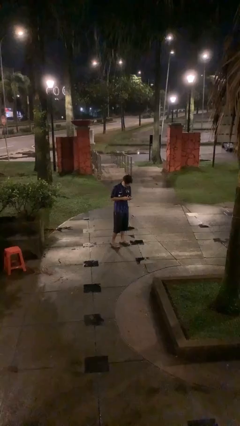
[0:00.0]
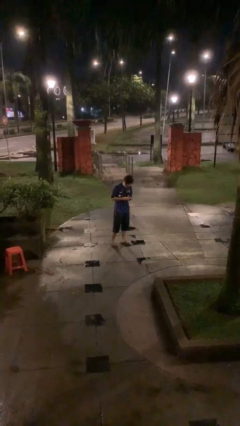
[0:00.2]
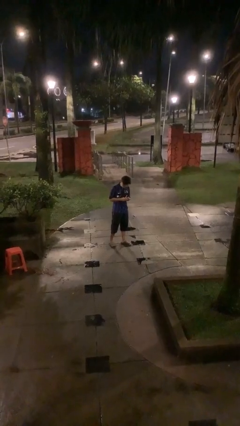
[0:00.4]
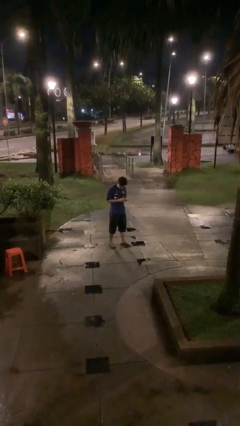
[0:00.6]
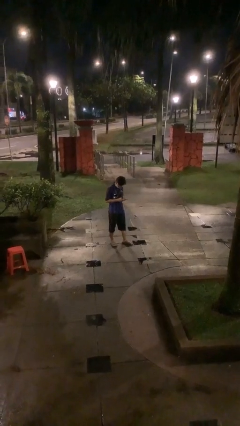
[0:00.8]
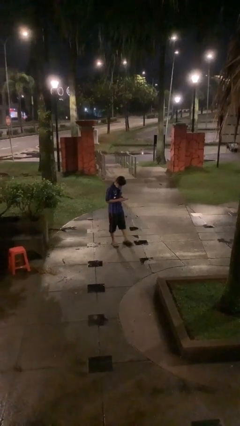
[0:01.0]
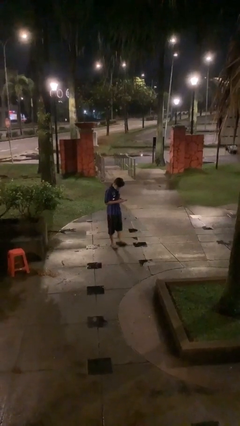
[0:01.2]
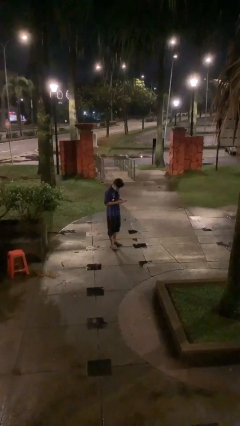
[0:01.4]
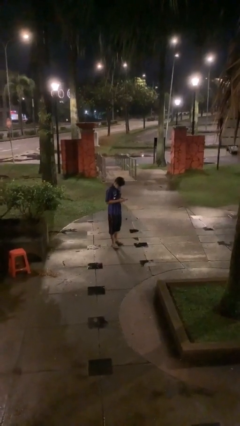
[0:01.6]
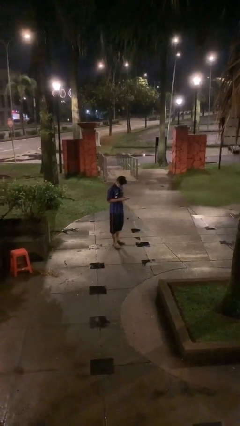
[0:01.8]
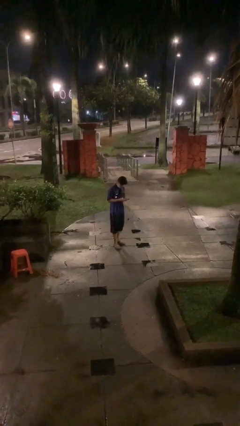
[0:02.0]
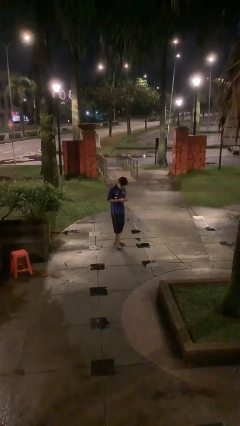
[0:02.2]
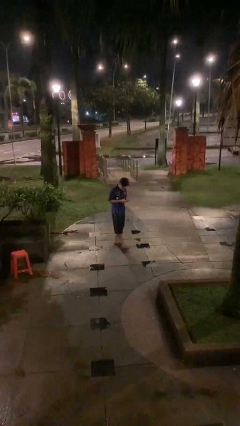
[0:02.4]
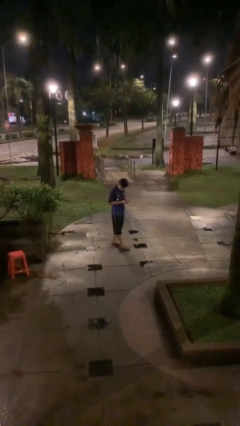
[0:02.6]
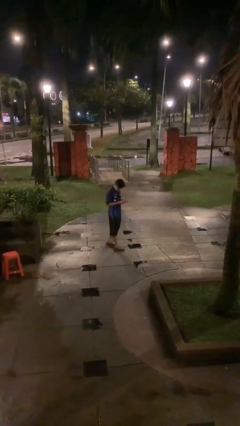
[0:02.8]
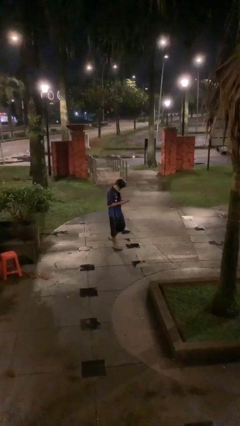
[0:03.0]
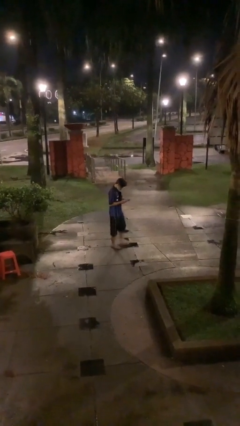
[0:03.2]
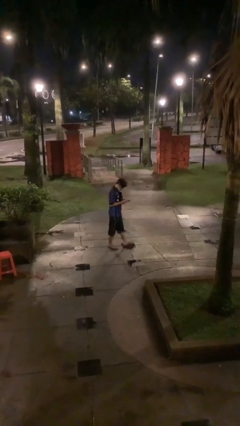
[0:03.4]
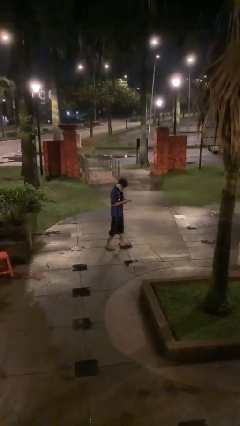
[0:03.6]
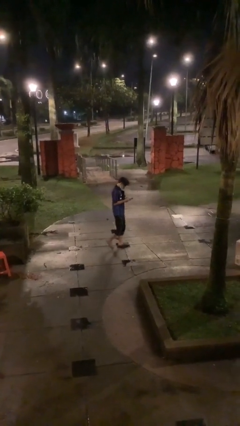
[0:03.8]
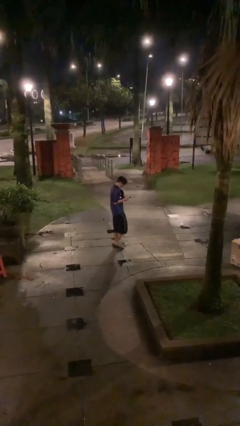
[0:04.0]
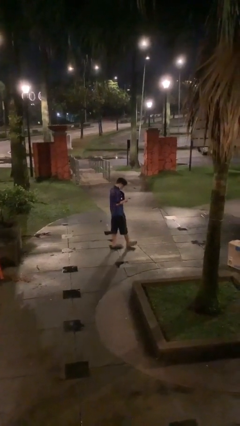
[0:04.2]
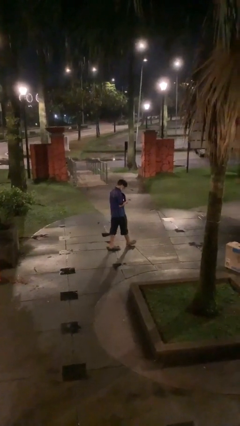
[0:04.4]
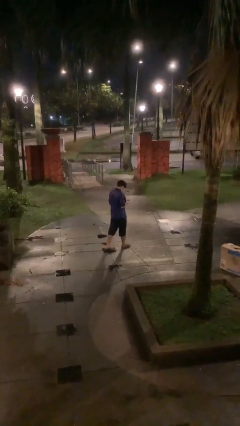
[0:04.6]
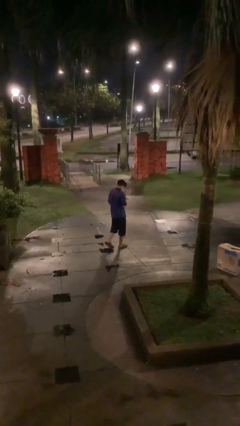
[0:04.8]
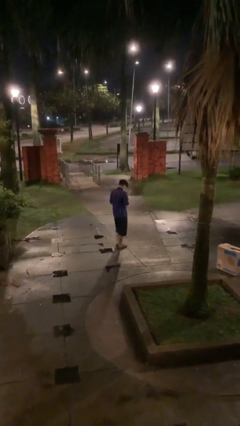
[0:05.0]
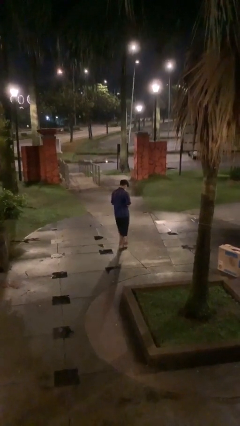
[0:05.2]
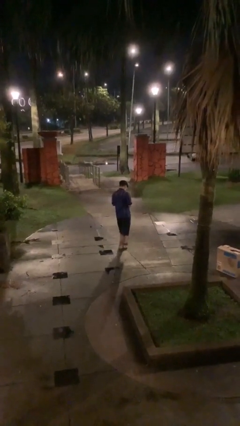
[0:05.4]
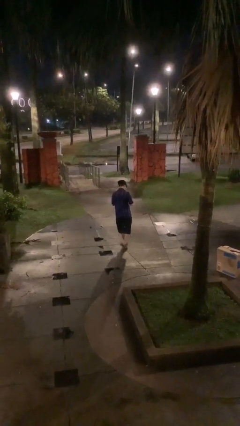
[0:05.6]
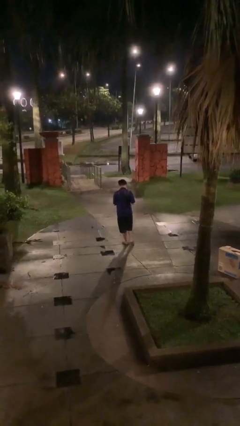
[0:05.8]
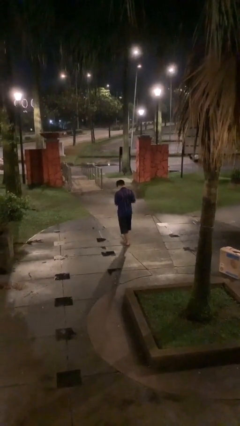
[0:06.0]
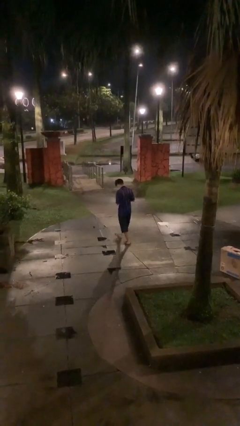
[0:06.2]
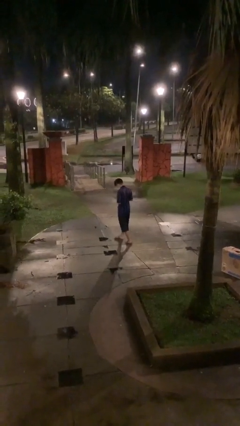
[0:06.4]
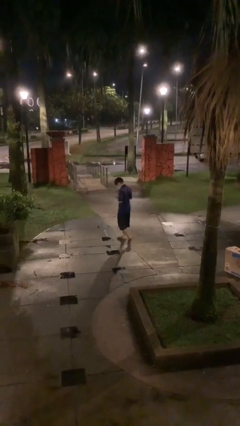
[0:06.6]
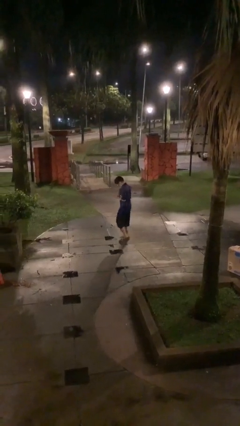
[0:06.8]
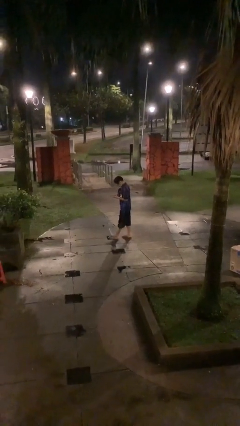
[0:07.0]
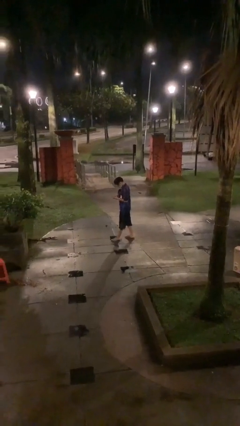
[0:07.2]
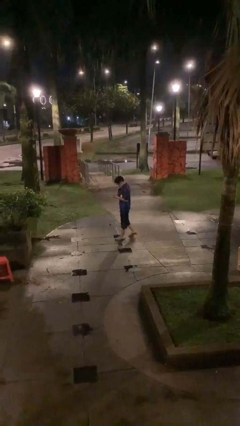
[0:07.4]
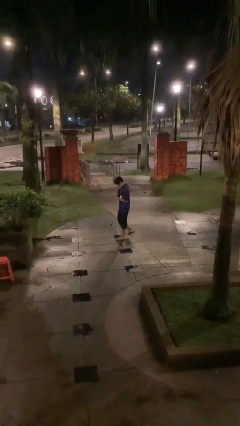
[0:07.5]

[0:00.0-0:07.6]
person texts on phone

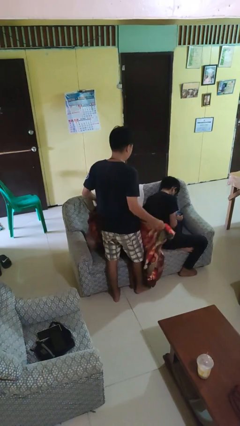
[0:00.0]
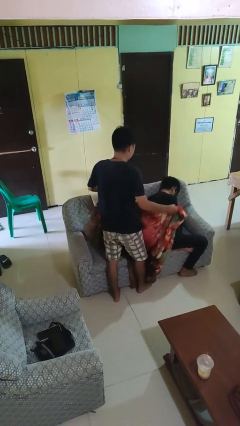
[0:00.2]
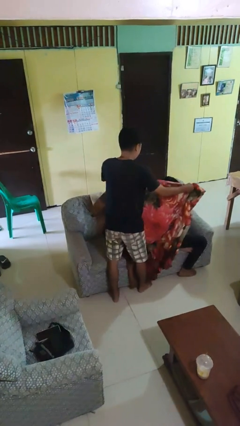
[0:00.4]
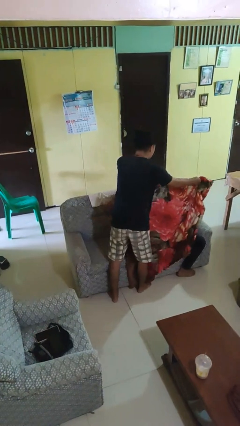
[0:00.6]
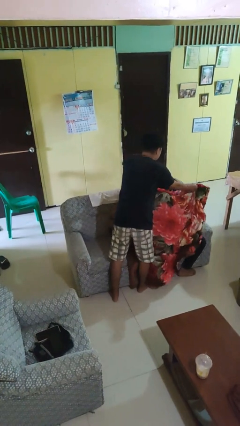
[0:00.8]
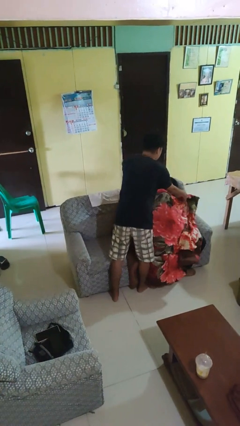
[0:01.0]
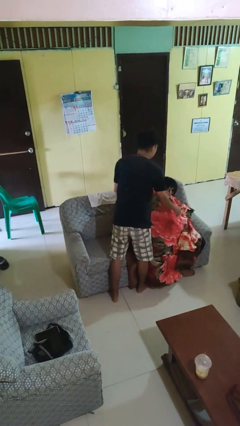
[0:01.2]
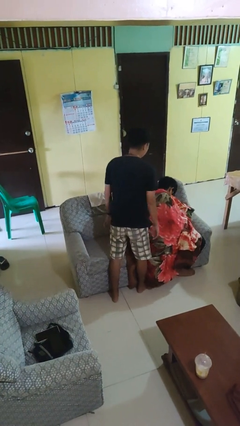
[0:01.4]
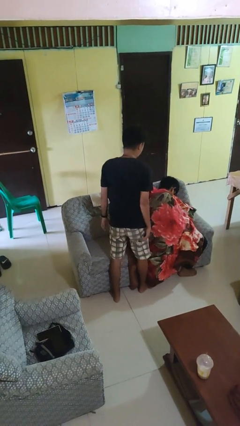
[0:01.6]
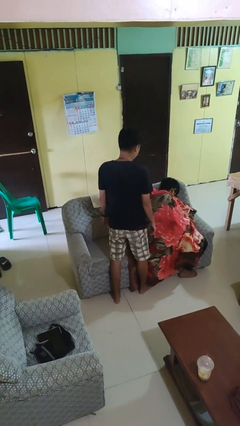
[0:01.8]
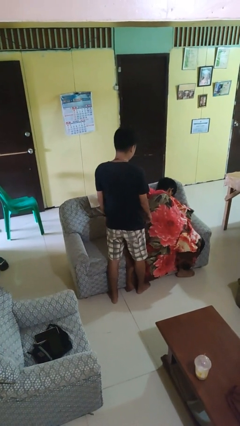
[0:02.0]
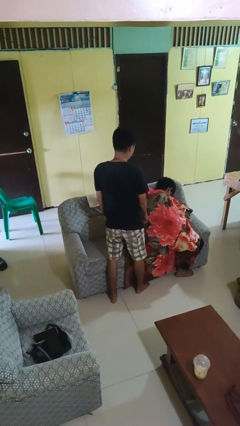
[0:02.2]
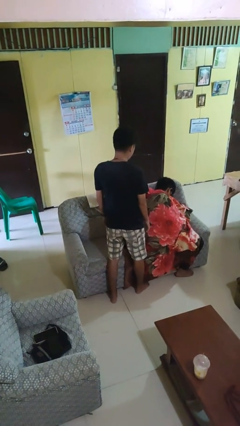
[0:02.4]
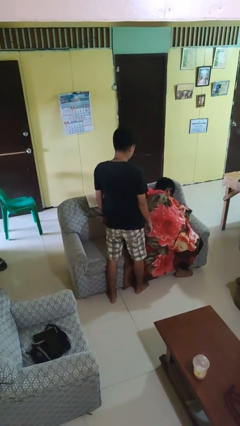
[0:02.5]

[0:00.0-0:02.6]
person covers friend with blanket

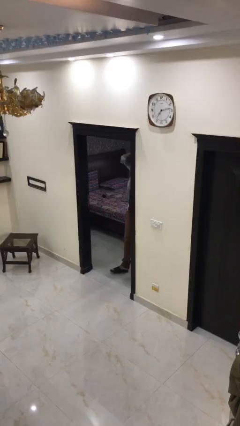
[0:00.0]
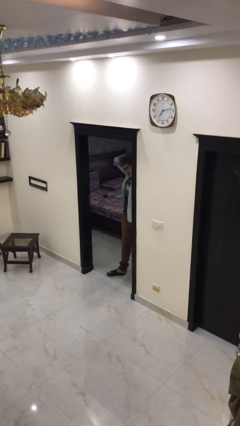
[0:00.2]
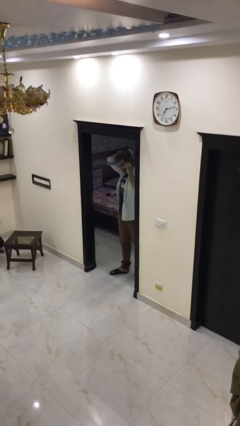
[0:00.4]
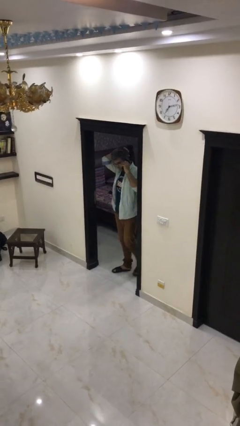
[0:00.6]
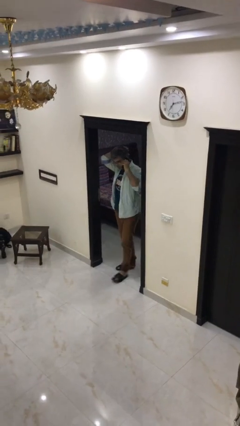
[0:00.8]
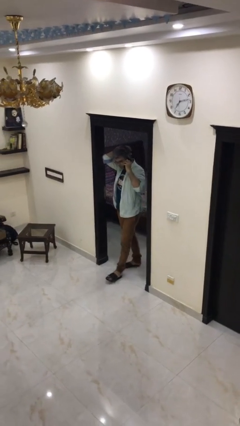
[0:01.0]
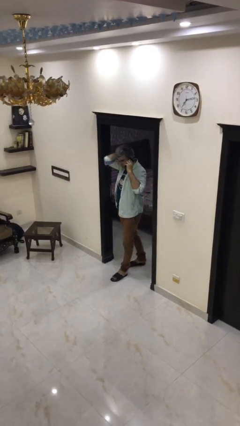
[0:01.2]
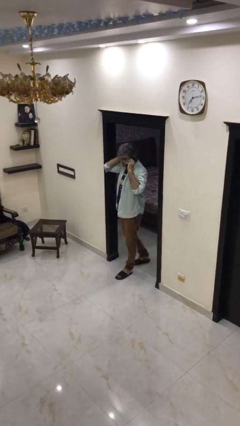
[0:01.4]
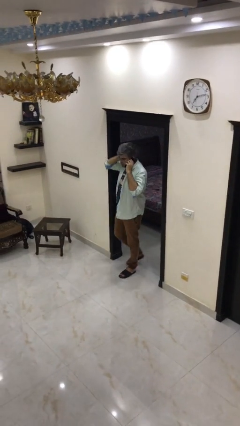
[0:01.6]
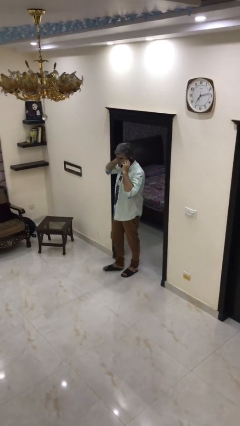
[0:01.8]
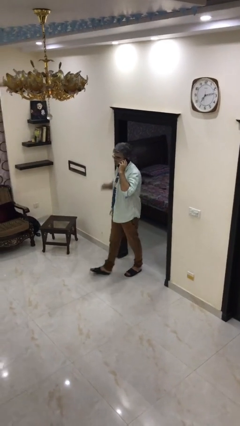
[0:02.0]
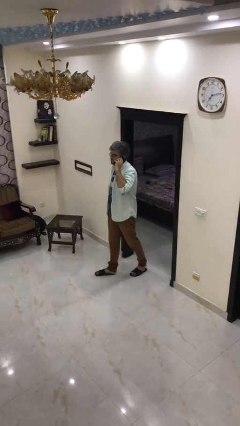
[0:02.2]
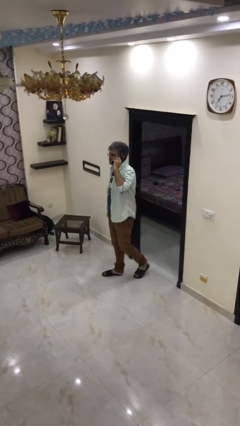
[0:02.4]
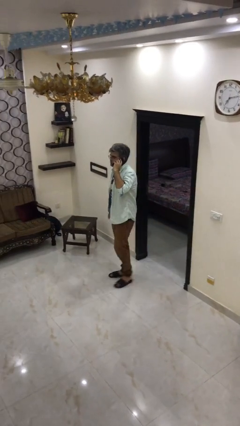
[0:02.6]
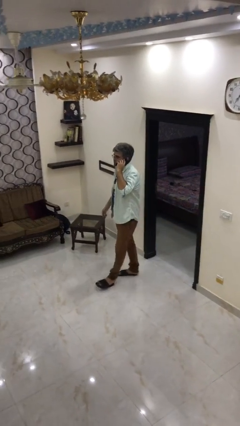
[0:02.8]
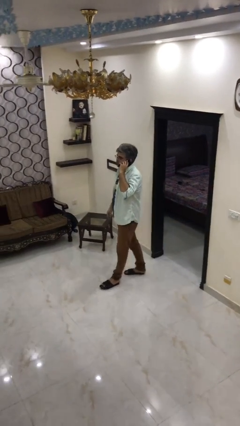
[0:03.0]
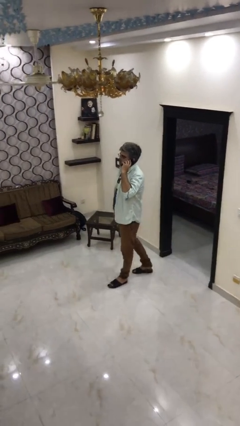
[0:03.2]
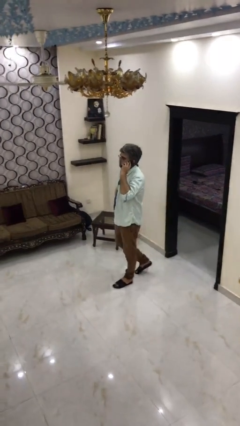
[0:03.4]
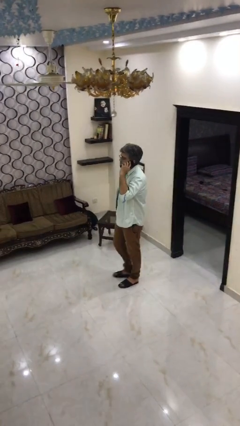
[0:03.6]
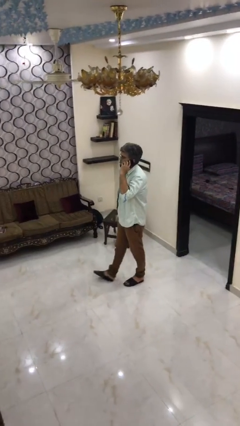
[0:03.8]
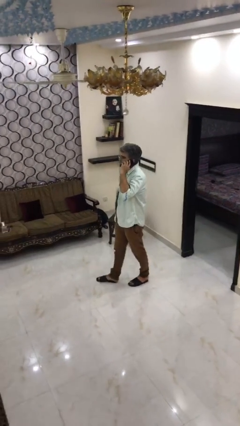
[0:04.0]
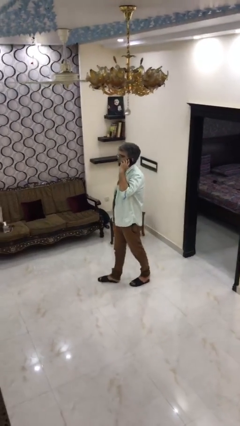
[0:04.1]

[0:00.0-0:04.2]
person enters scene through structure

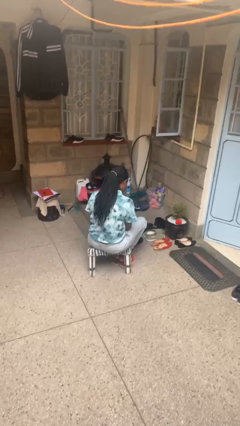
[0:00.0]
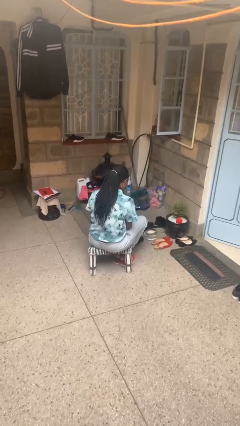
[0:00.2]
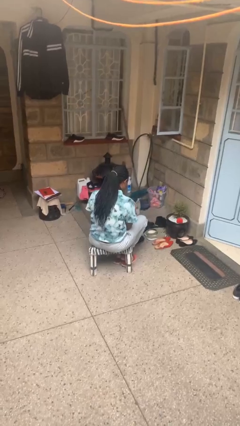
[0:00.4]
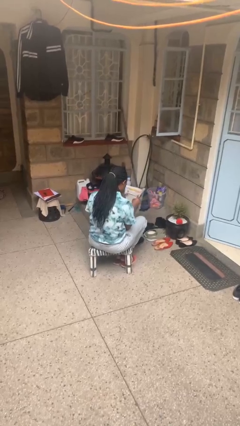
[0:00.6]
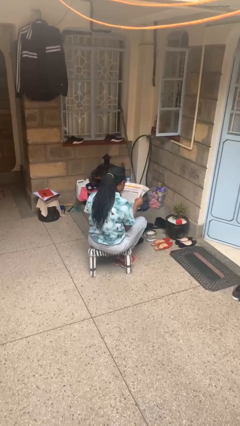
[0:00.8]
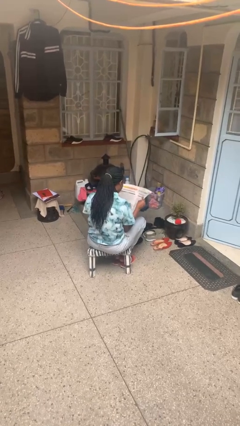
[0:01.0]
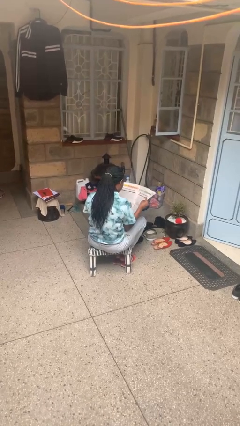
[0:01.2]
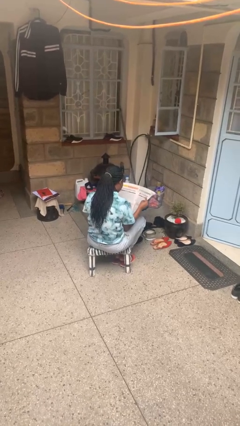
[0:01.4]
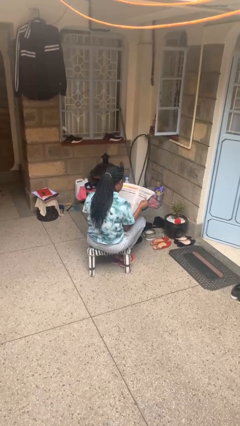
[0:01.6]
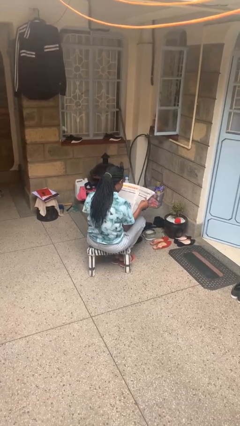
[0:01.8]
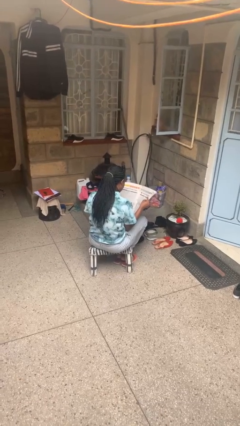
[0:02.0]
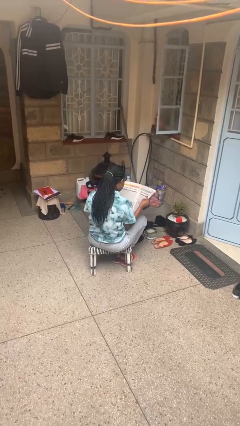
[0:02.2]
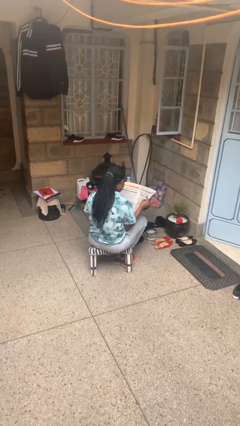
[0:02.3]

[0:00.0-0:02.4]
person reads newspaper

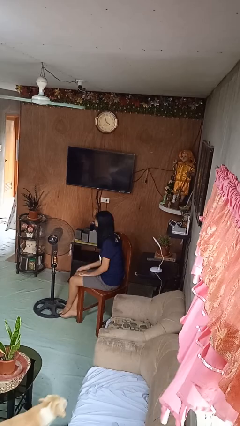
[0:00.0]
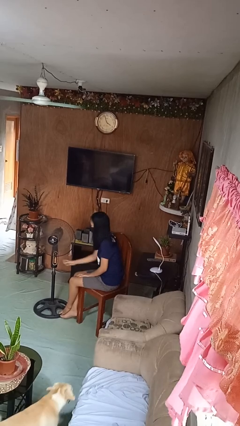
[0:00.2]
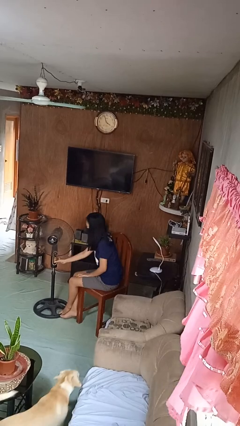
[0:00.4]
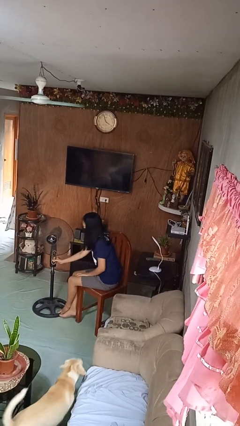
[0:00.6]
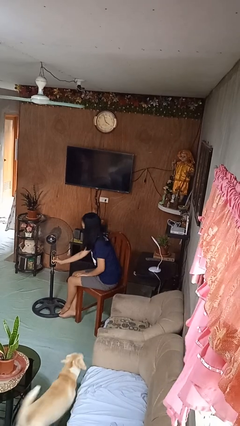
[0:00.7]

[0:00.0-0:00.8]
person turns on fan
